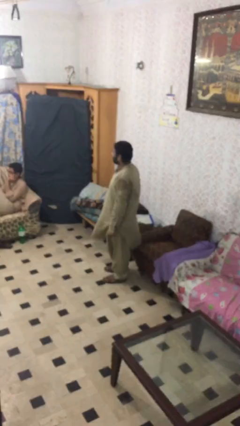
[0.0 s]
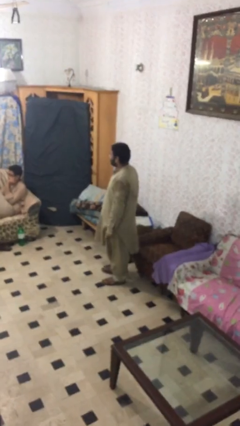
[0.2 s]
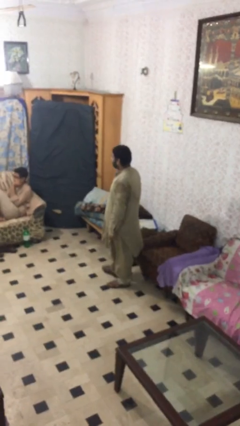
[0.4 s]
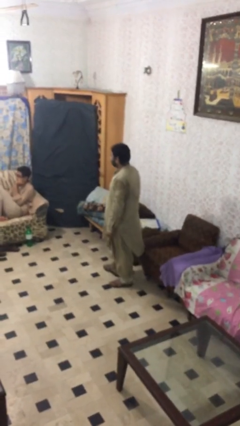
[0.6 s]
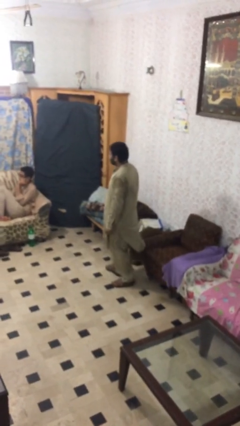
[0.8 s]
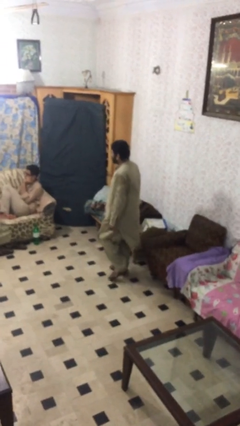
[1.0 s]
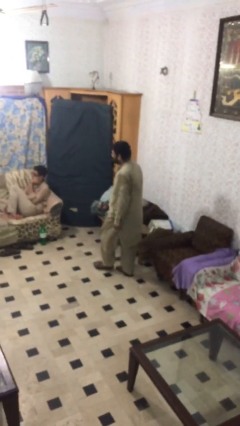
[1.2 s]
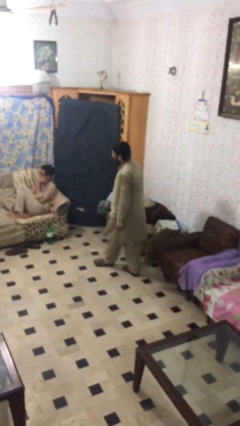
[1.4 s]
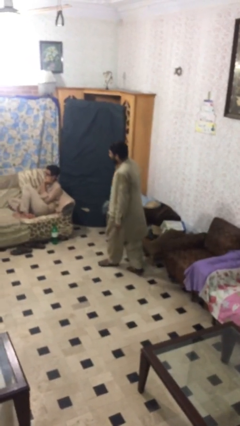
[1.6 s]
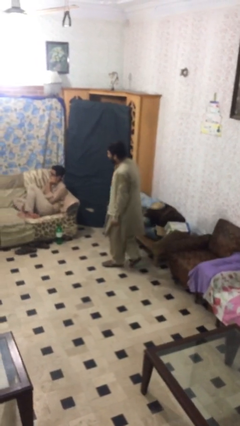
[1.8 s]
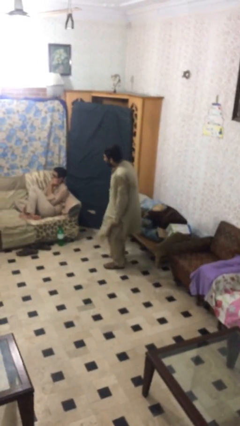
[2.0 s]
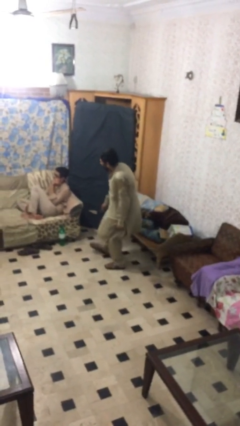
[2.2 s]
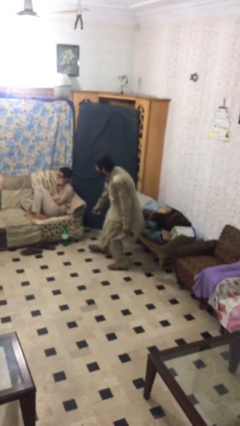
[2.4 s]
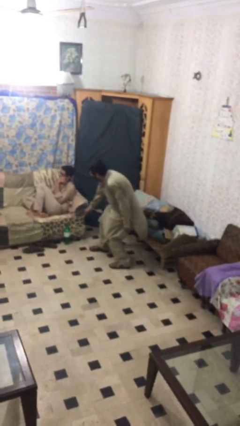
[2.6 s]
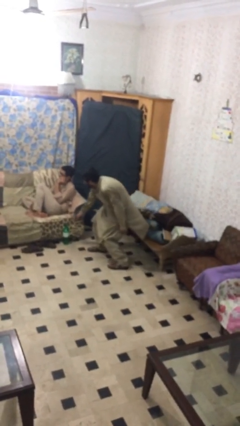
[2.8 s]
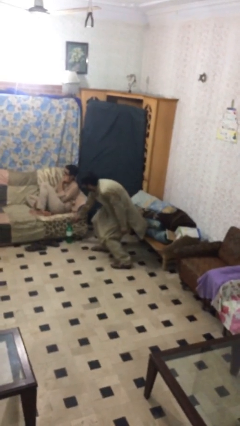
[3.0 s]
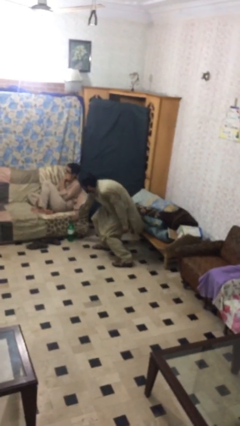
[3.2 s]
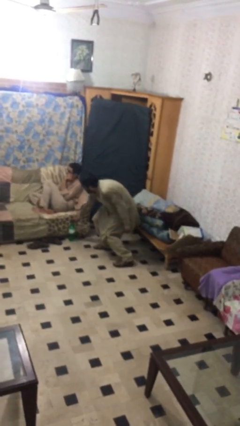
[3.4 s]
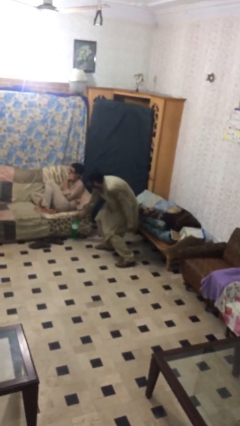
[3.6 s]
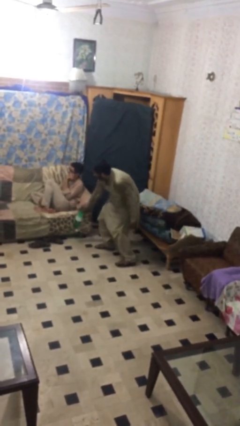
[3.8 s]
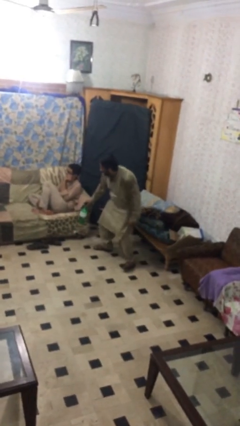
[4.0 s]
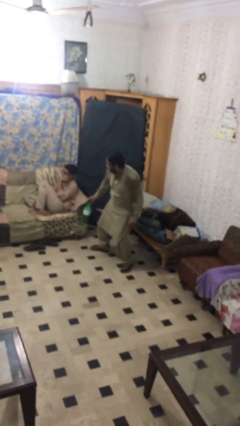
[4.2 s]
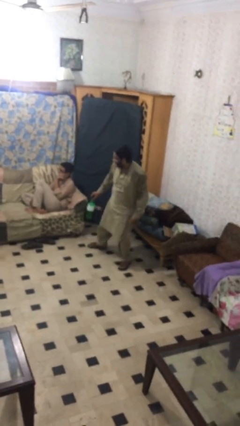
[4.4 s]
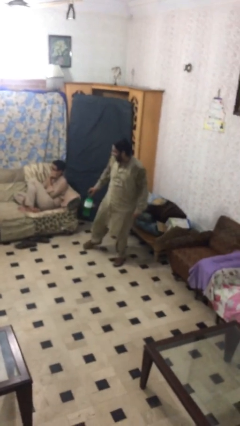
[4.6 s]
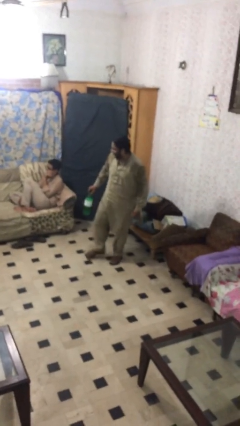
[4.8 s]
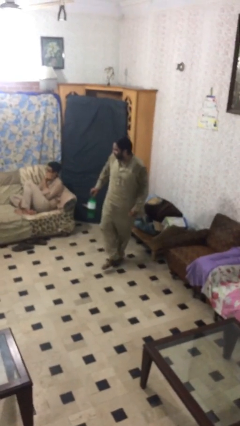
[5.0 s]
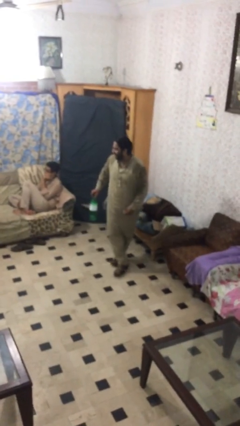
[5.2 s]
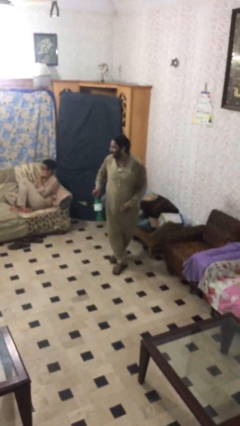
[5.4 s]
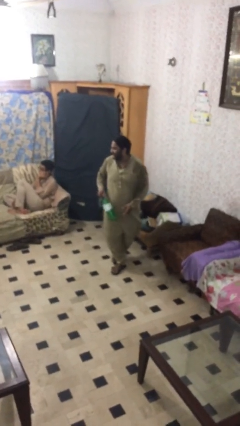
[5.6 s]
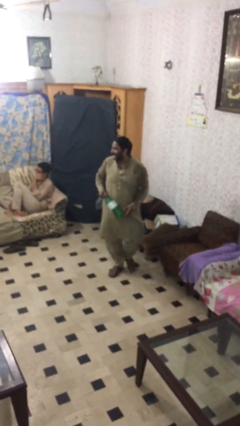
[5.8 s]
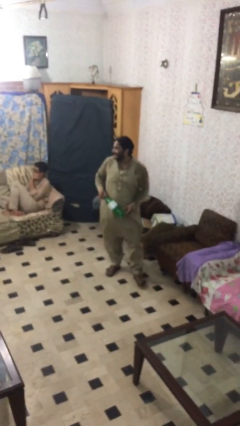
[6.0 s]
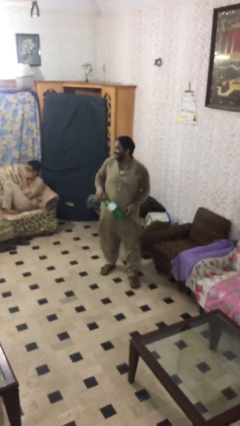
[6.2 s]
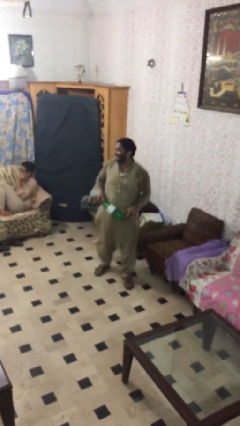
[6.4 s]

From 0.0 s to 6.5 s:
person steals object from person

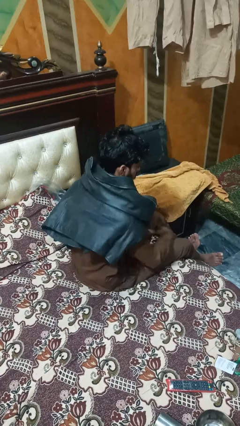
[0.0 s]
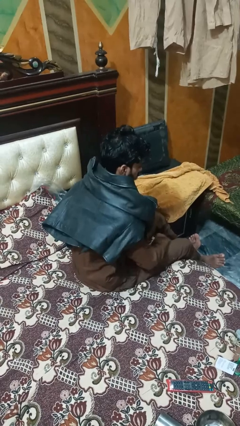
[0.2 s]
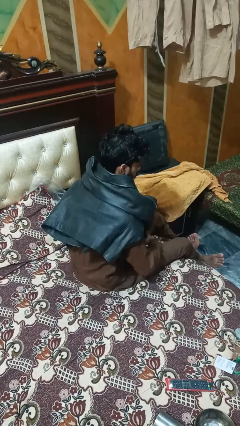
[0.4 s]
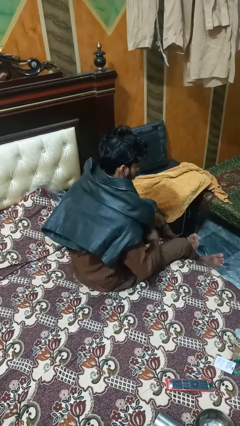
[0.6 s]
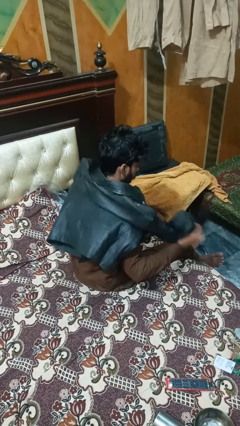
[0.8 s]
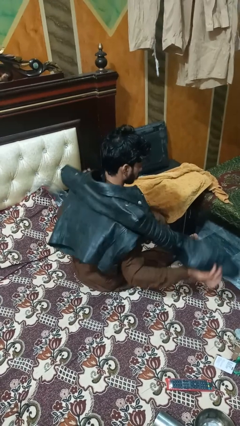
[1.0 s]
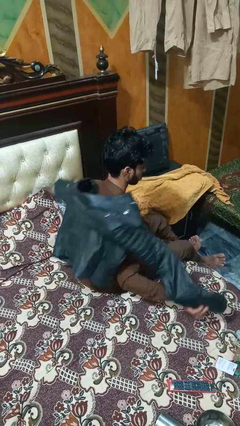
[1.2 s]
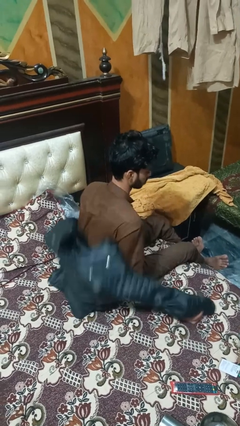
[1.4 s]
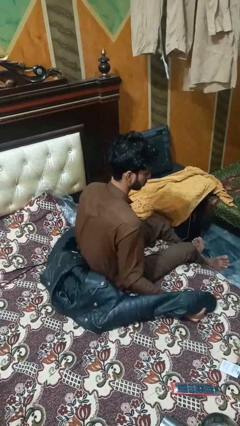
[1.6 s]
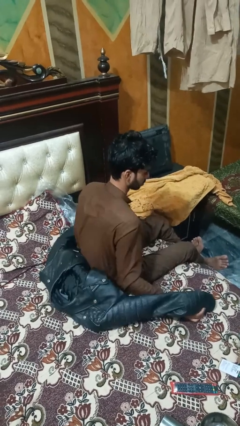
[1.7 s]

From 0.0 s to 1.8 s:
person unties jacket around waist

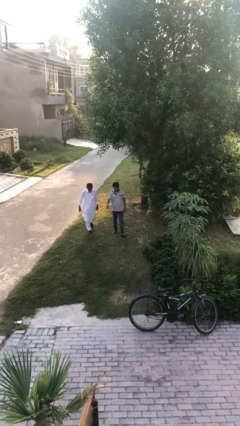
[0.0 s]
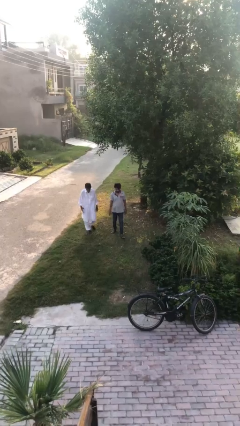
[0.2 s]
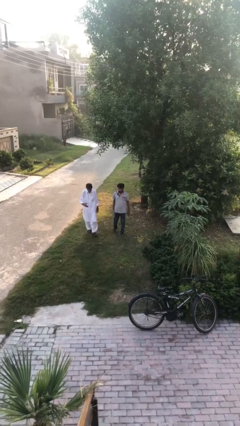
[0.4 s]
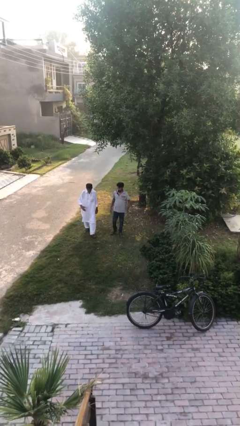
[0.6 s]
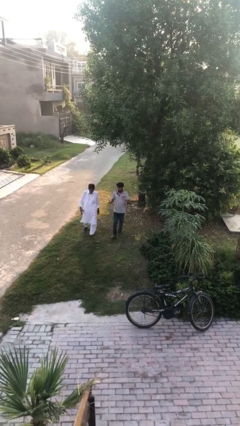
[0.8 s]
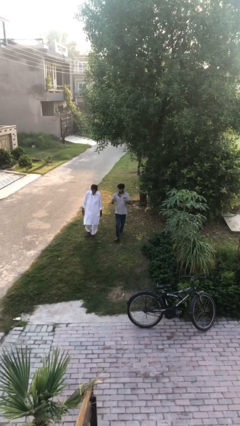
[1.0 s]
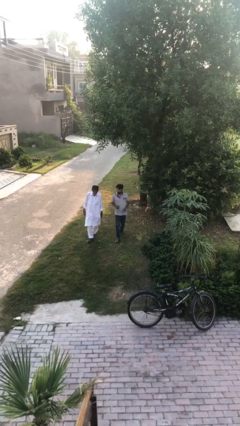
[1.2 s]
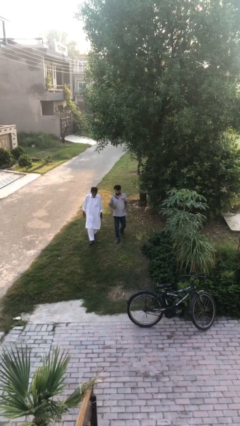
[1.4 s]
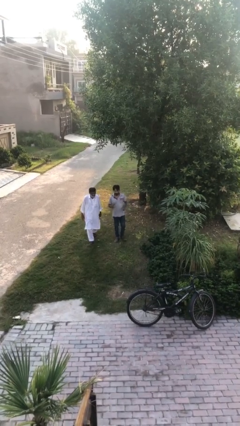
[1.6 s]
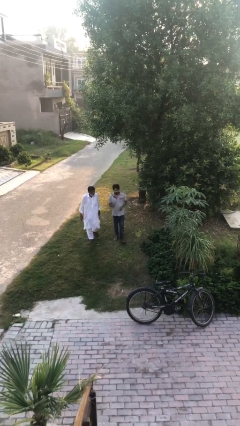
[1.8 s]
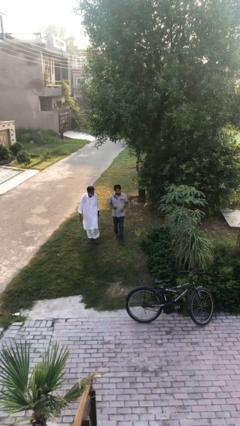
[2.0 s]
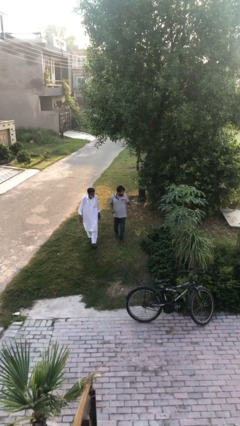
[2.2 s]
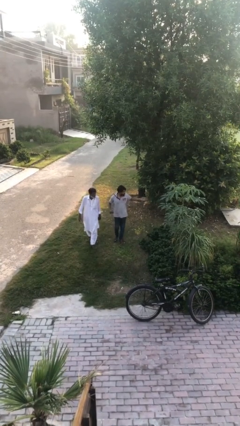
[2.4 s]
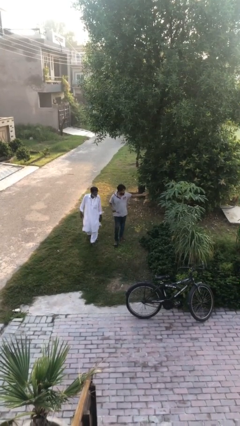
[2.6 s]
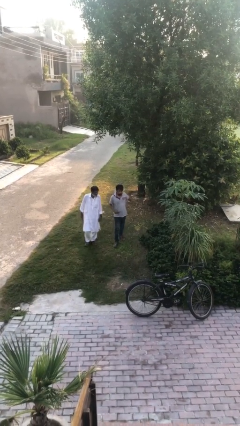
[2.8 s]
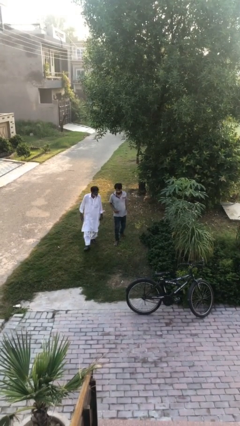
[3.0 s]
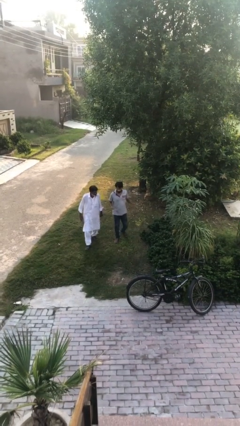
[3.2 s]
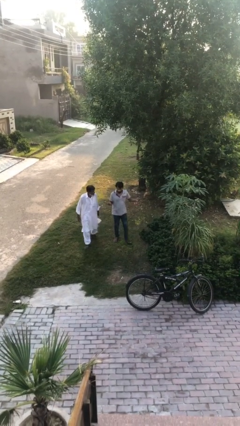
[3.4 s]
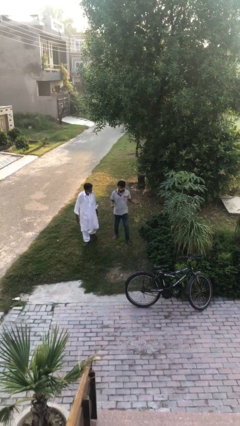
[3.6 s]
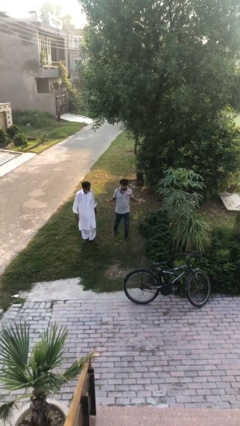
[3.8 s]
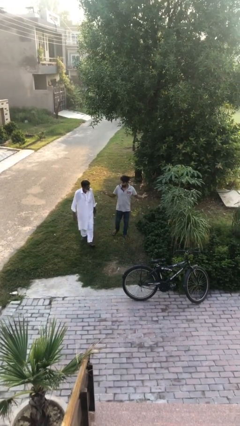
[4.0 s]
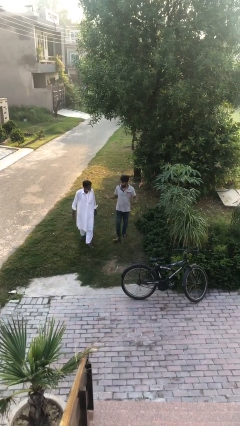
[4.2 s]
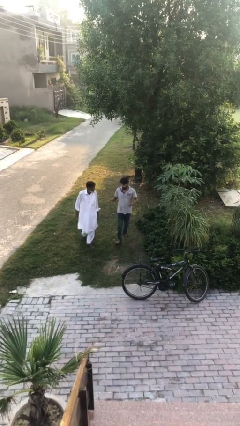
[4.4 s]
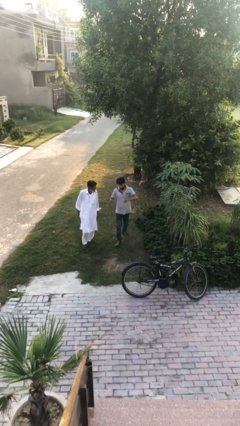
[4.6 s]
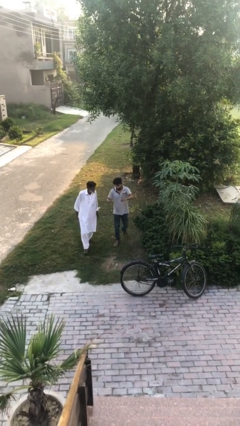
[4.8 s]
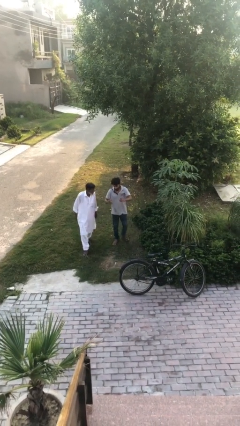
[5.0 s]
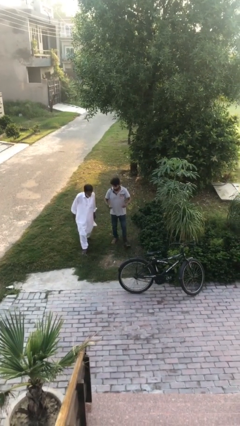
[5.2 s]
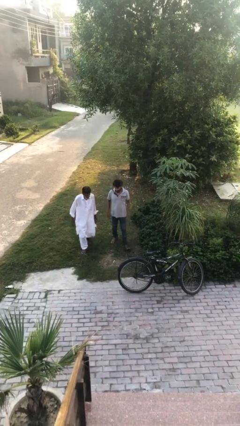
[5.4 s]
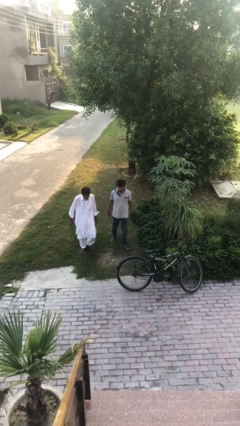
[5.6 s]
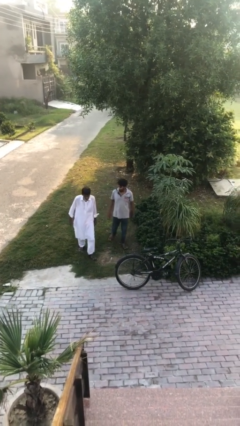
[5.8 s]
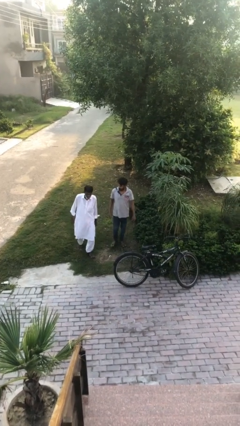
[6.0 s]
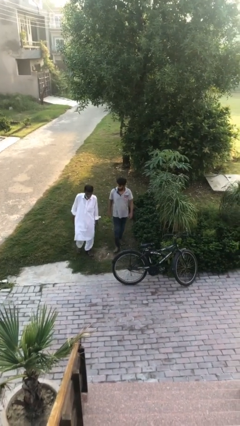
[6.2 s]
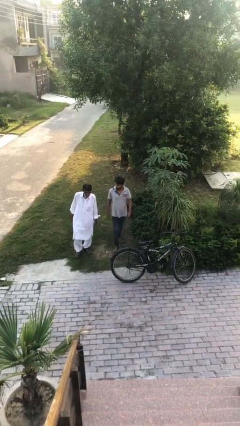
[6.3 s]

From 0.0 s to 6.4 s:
person talks to person

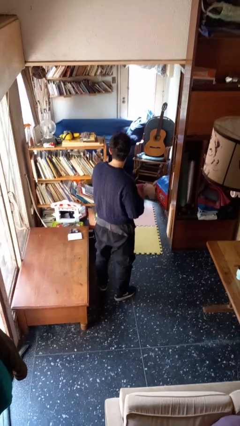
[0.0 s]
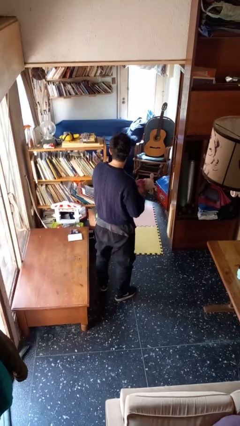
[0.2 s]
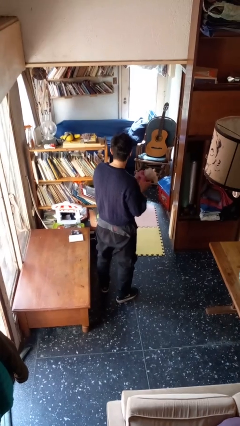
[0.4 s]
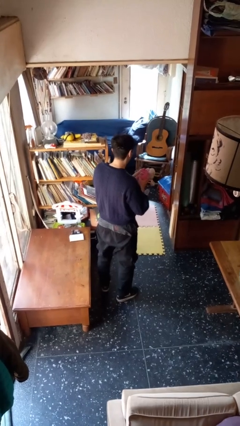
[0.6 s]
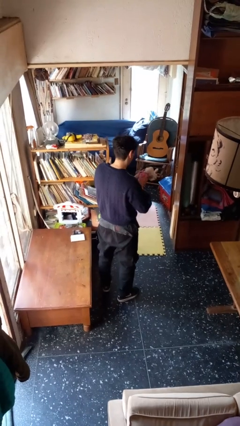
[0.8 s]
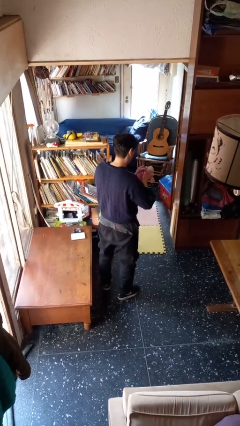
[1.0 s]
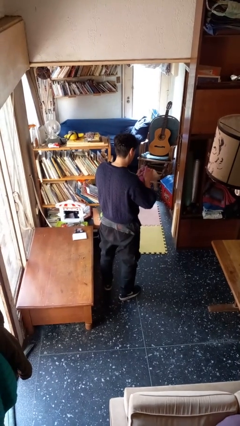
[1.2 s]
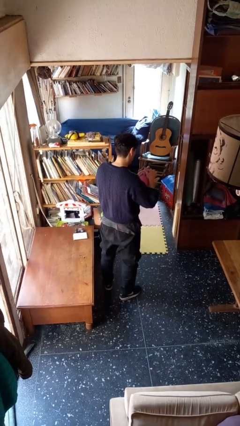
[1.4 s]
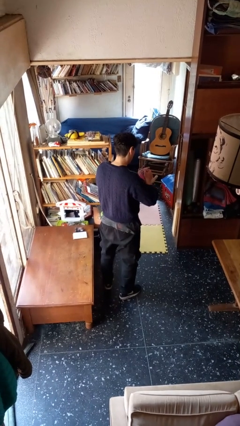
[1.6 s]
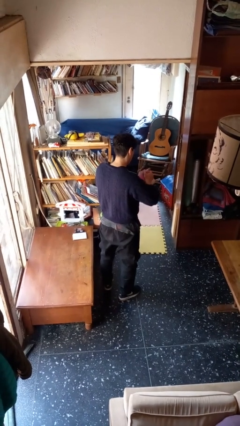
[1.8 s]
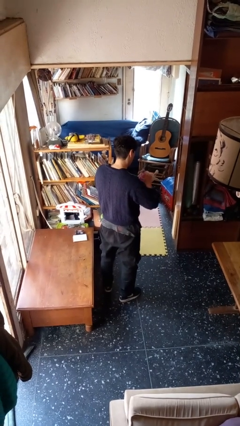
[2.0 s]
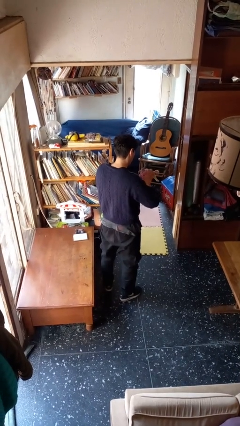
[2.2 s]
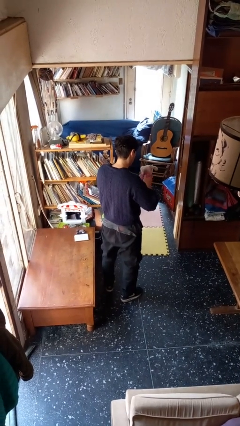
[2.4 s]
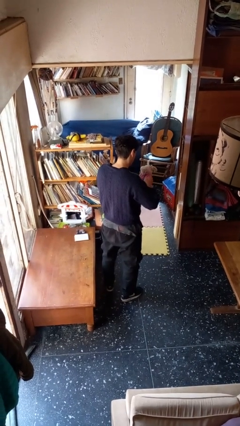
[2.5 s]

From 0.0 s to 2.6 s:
person squeezes object

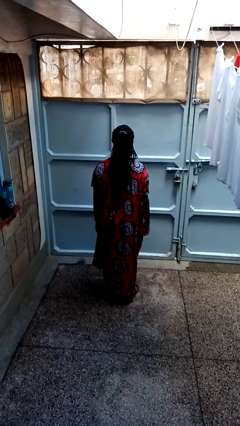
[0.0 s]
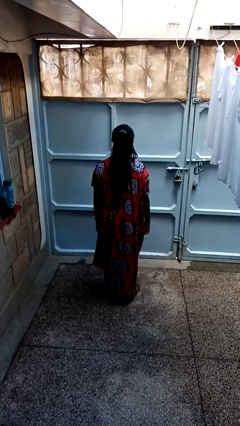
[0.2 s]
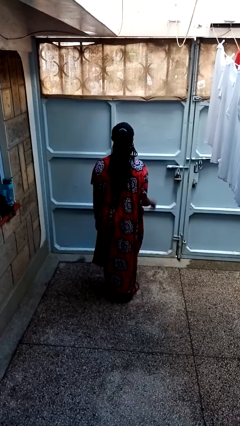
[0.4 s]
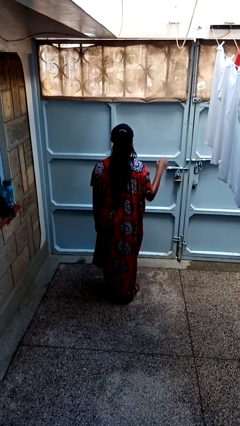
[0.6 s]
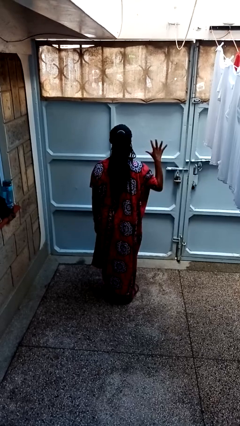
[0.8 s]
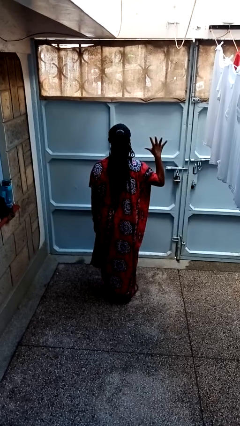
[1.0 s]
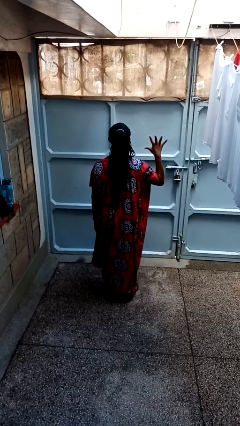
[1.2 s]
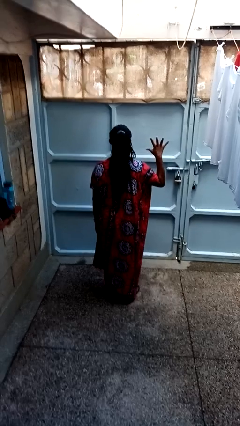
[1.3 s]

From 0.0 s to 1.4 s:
person gestures number five
